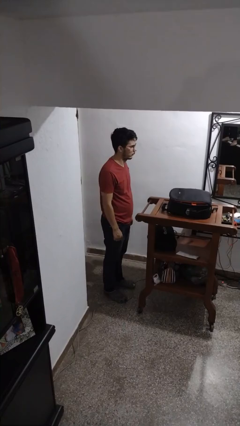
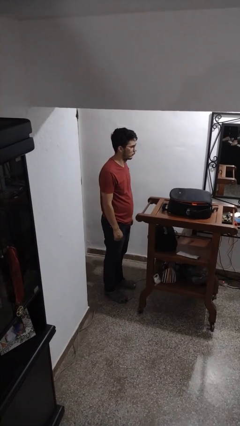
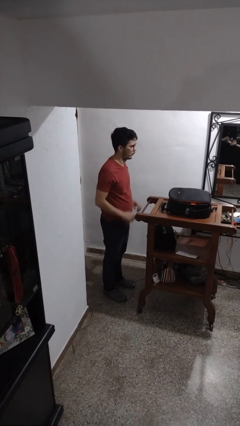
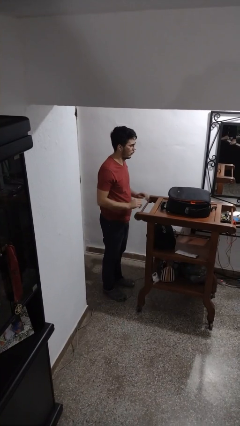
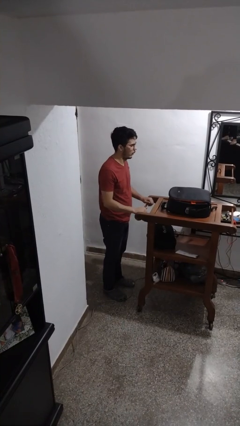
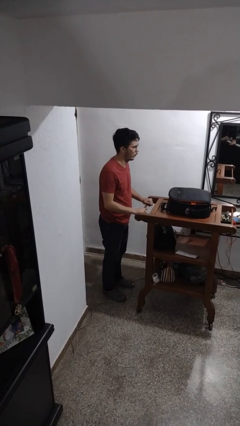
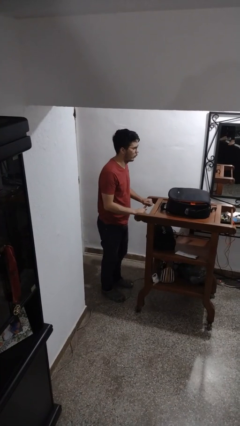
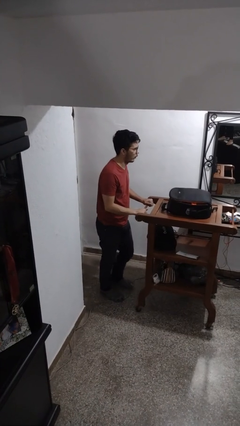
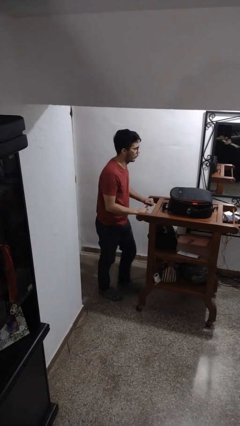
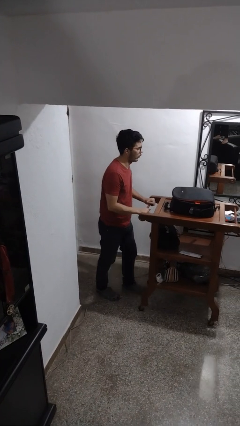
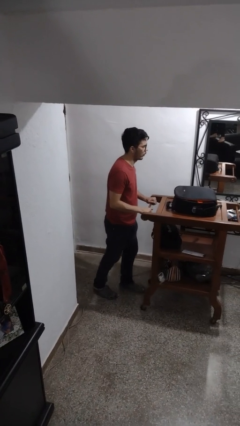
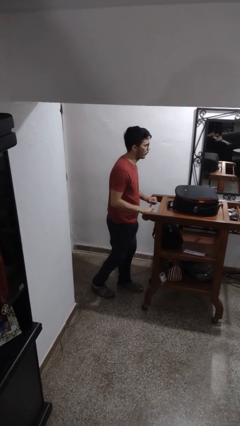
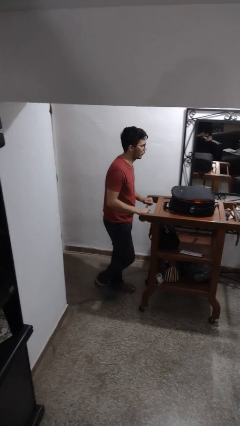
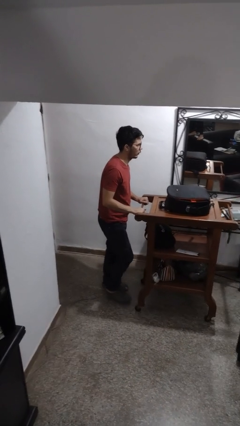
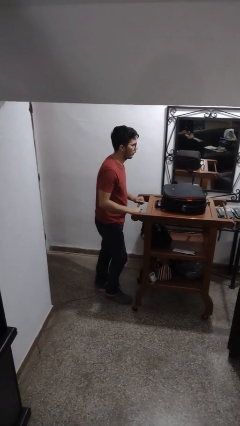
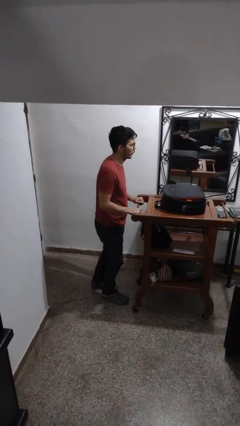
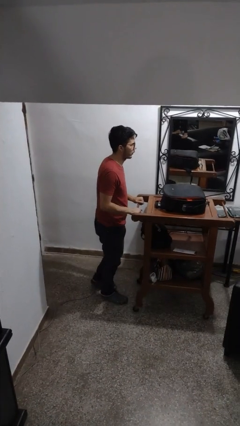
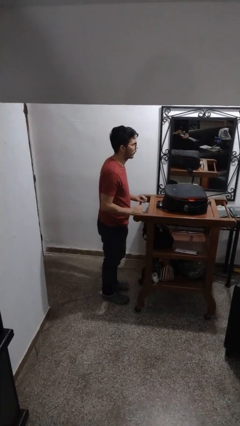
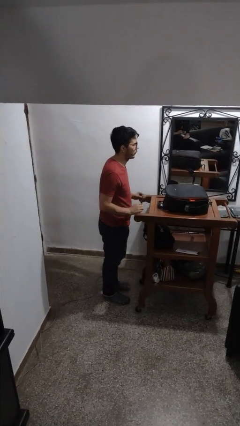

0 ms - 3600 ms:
person pushes wheeled cart

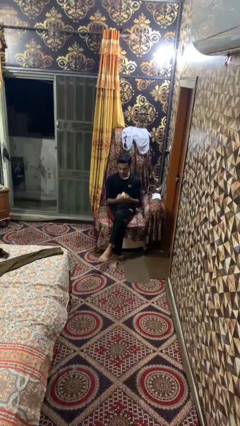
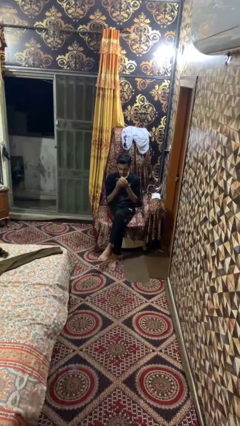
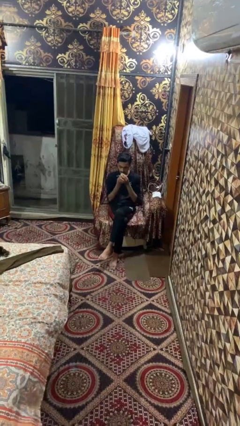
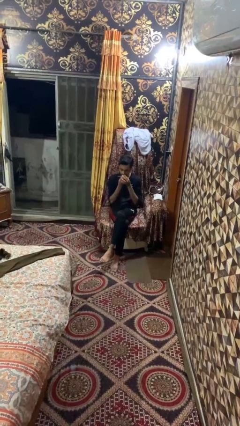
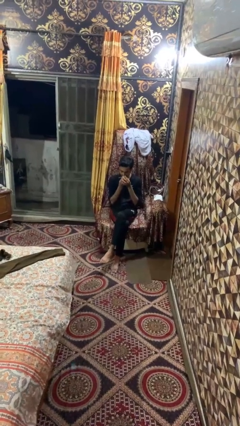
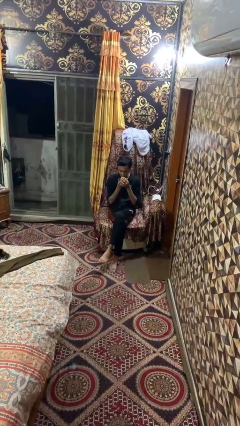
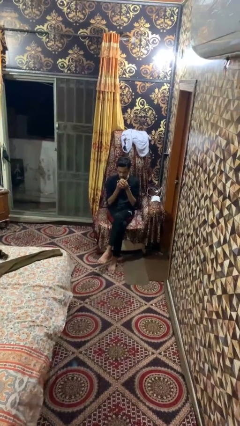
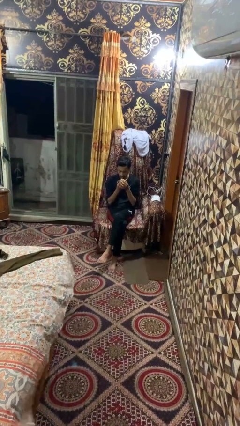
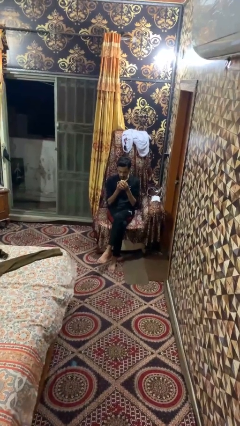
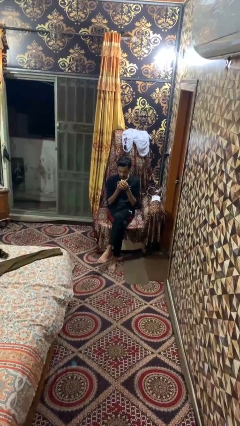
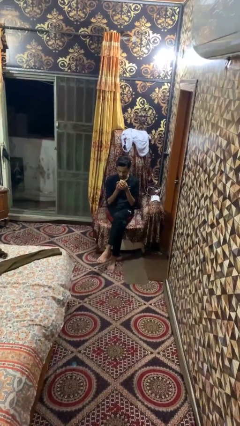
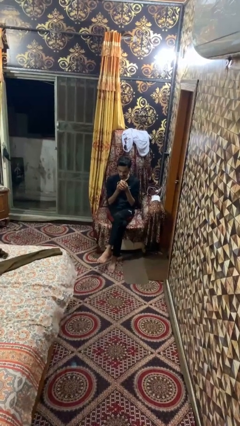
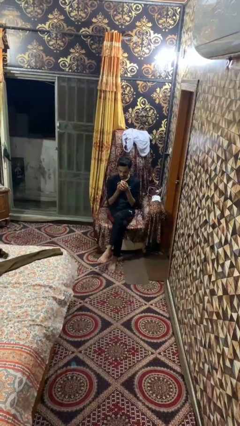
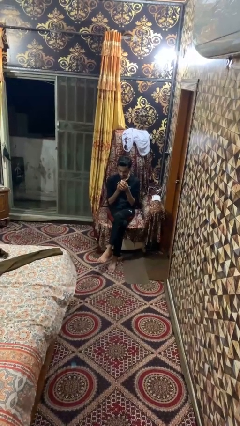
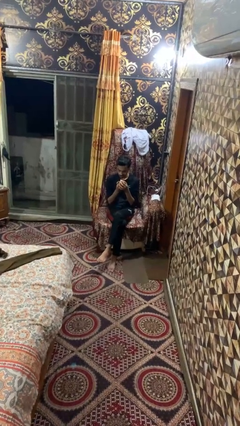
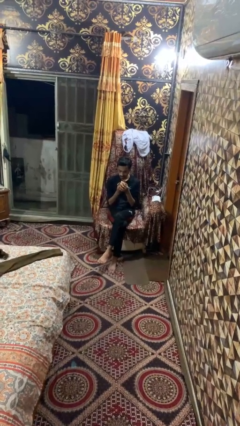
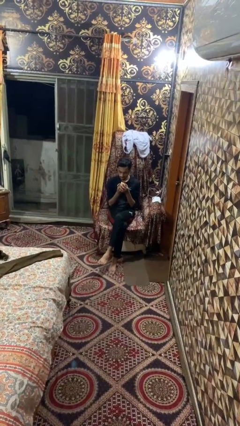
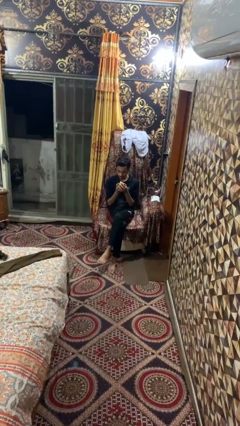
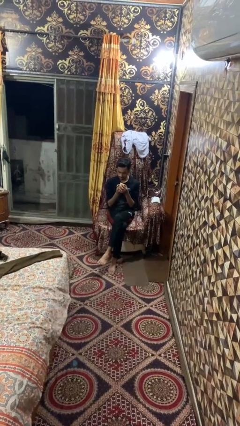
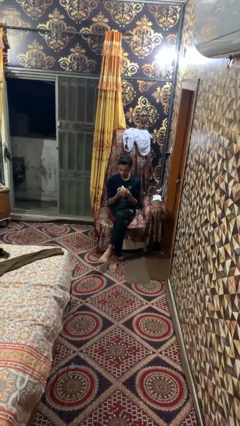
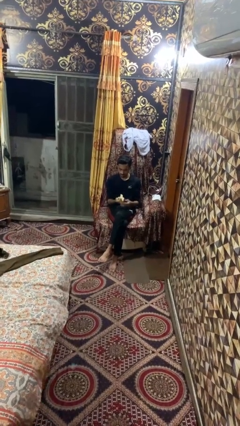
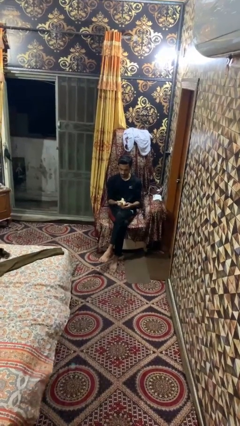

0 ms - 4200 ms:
person eats banana

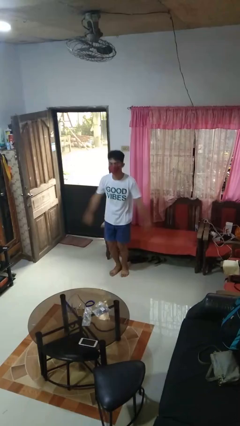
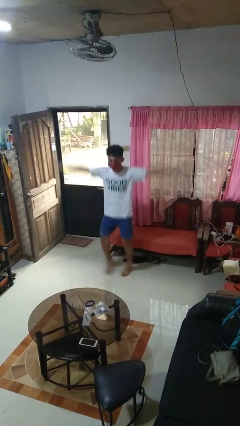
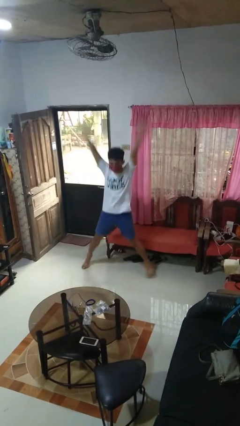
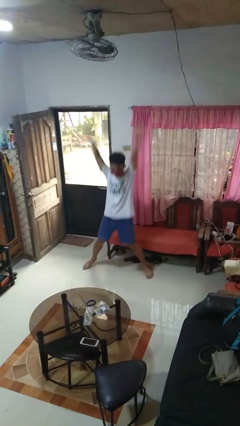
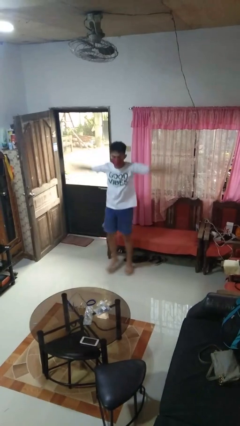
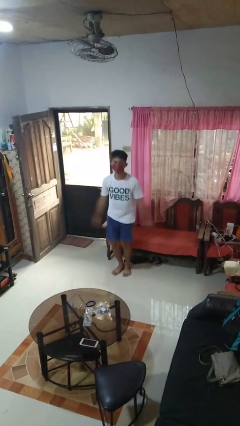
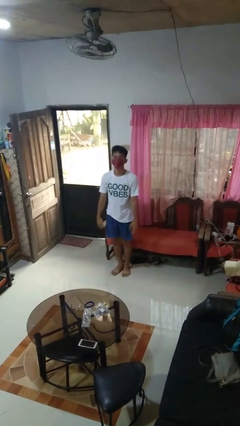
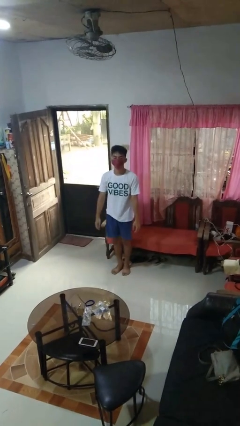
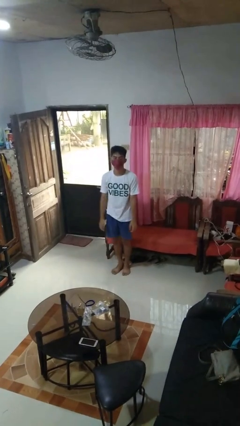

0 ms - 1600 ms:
person exercises with jumping jacks

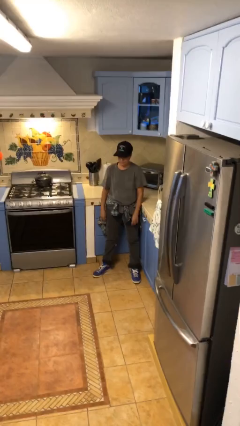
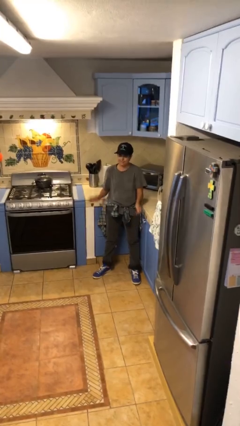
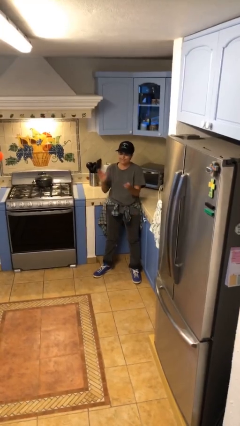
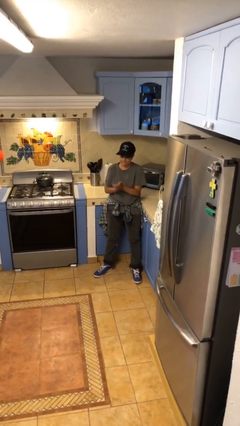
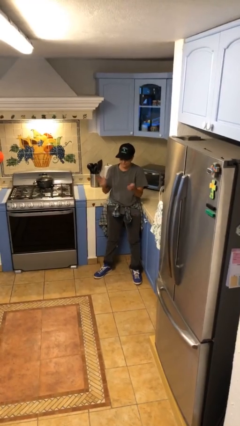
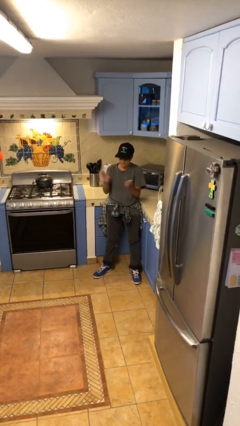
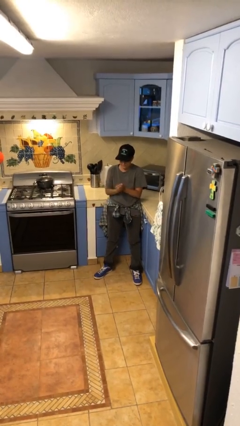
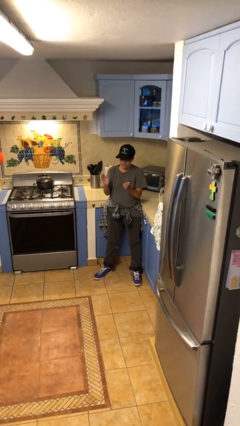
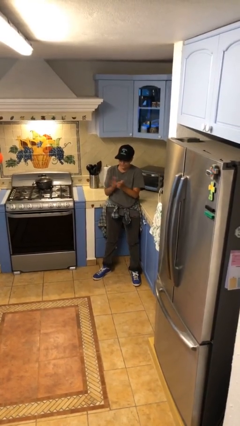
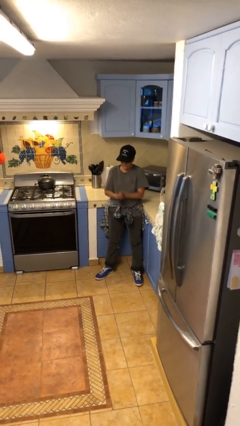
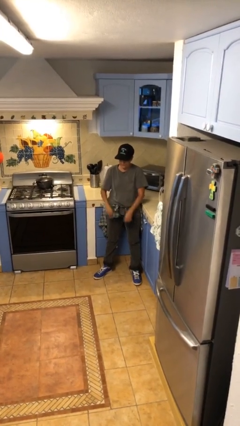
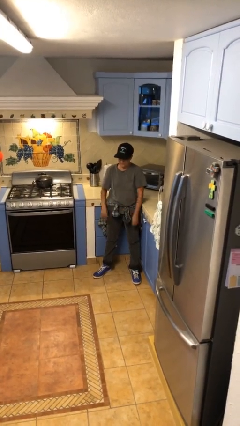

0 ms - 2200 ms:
person claps hands

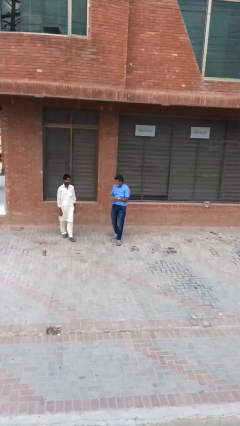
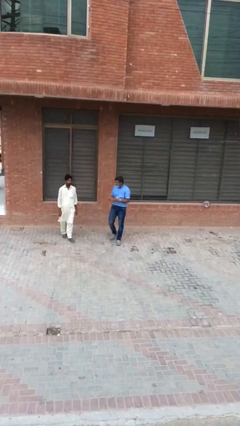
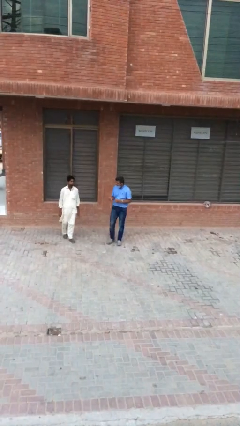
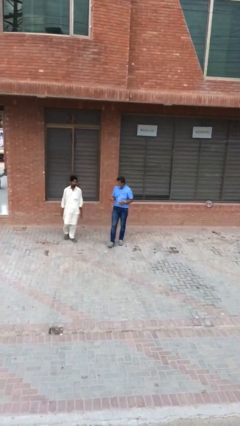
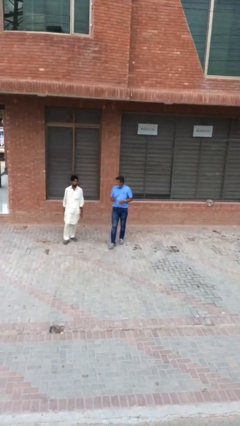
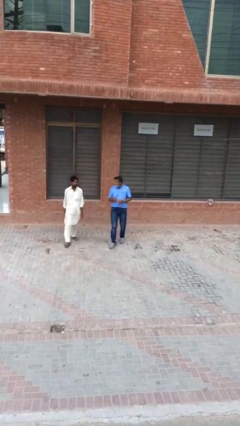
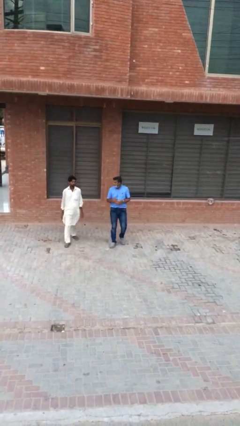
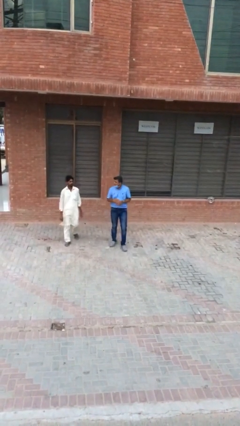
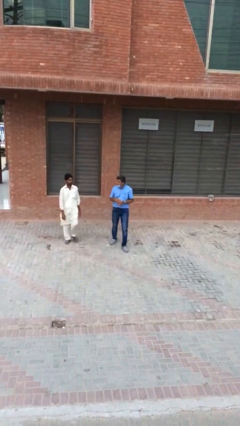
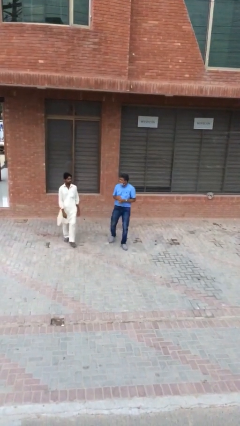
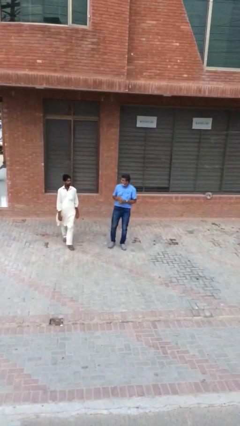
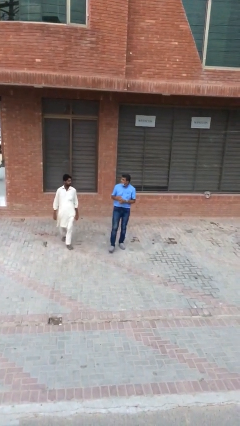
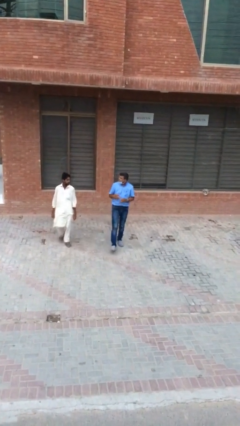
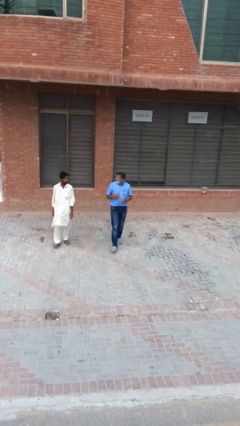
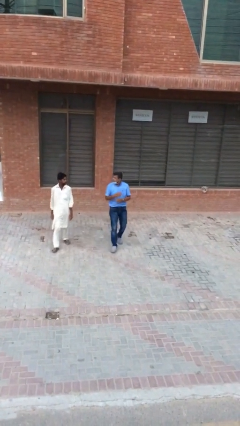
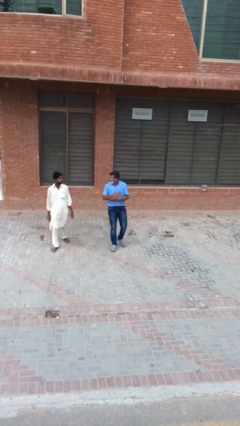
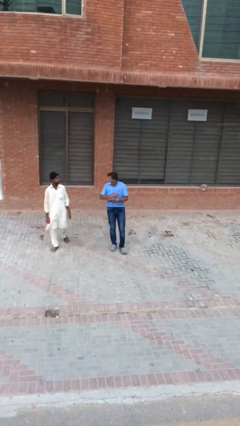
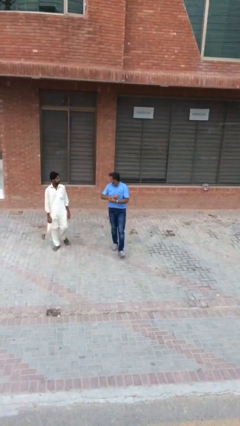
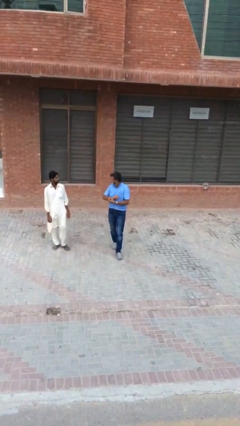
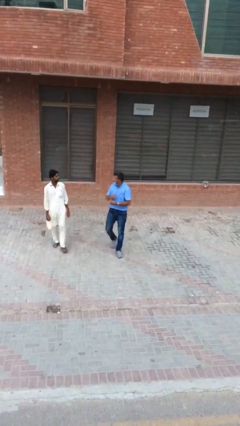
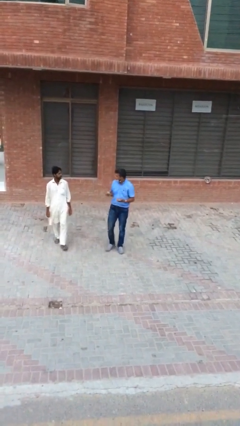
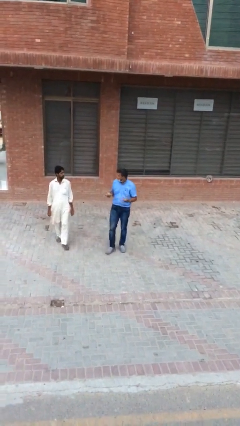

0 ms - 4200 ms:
person talks to person

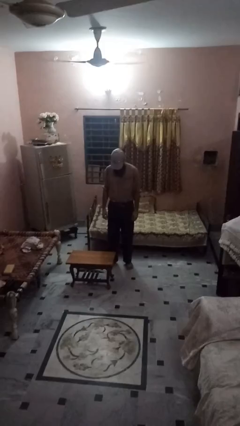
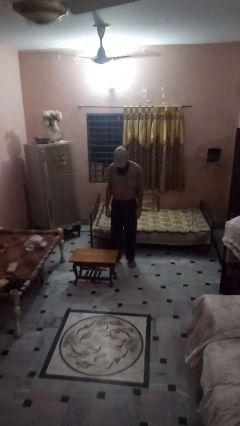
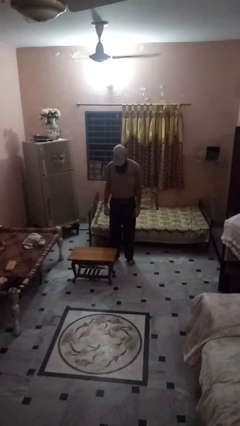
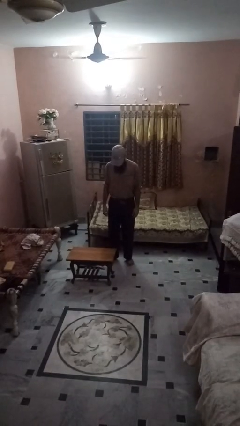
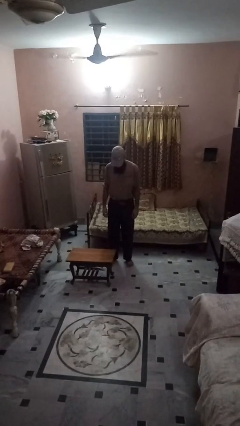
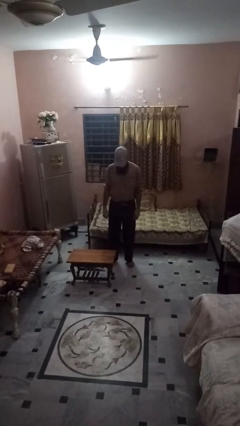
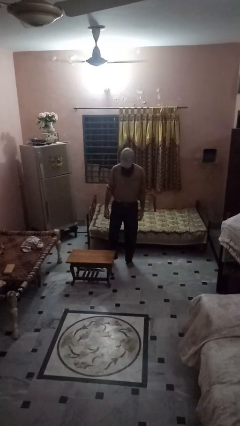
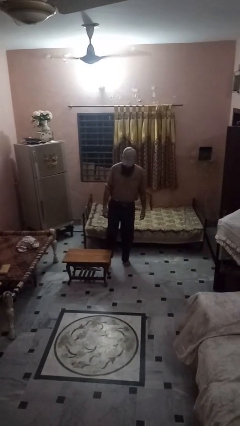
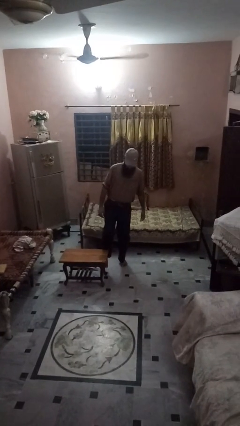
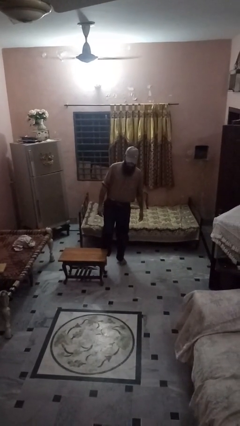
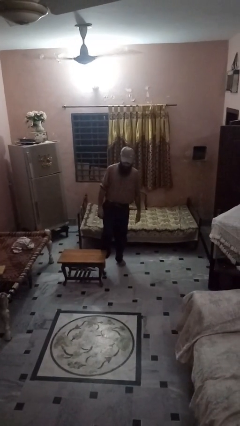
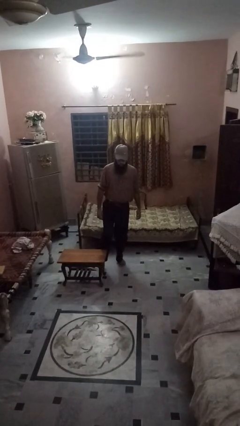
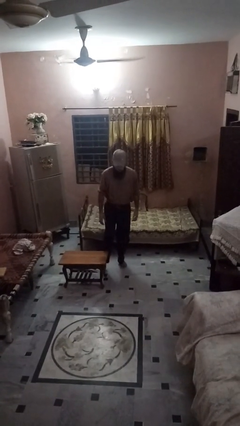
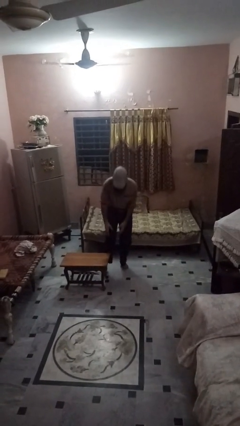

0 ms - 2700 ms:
person trips on object on floor
